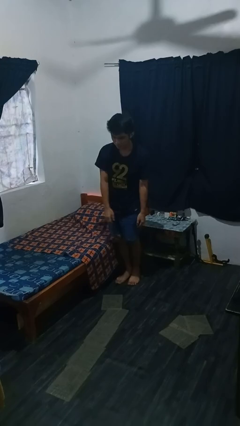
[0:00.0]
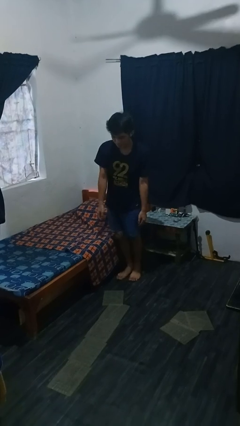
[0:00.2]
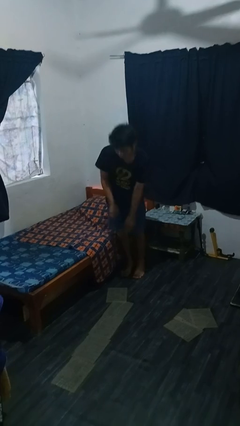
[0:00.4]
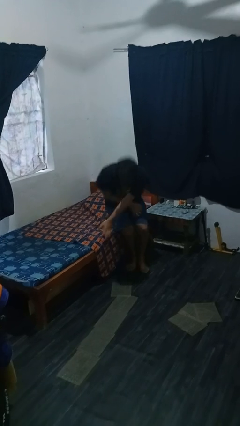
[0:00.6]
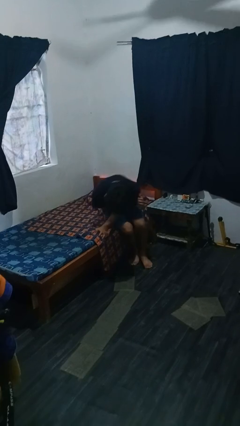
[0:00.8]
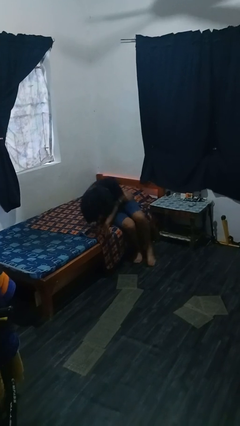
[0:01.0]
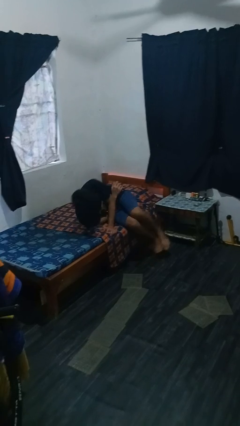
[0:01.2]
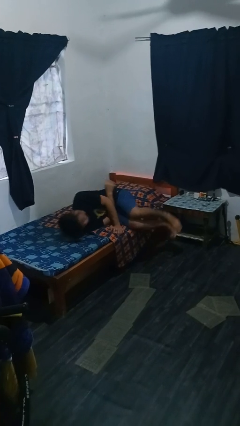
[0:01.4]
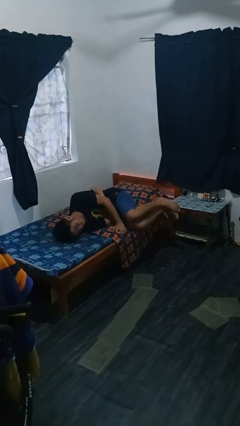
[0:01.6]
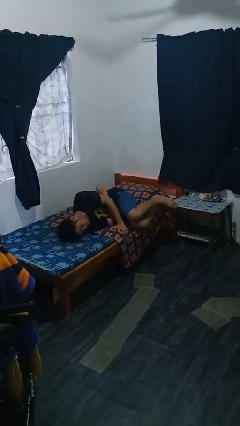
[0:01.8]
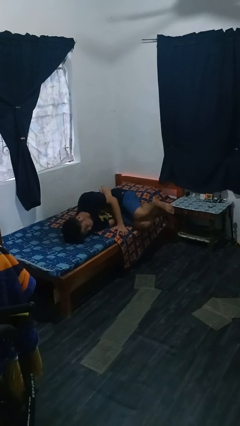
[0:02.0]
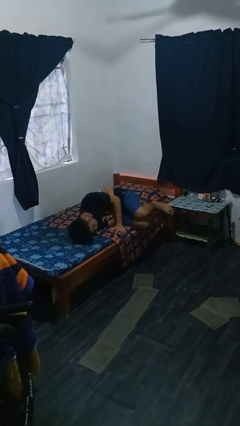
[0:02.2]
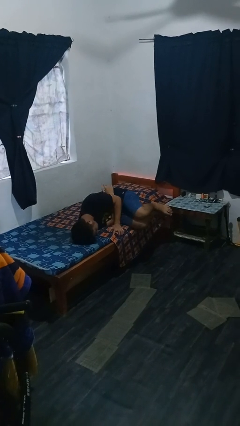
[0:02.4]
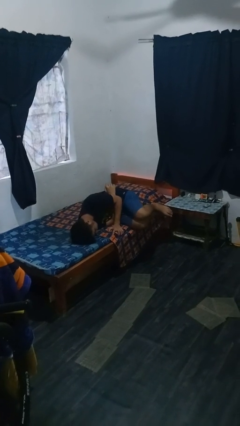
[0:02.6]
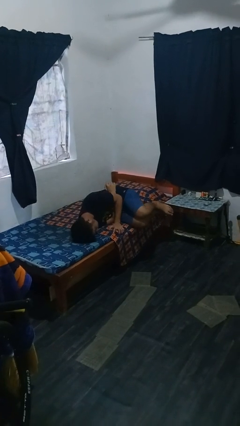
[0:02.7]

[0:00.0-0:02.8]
person lies down on bed

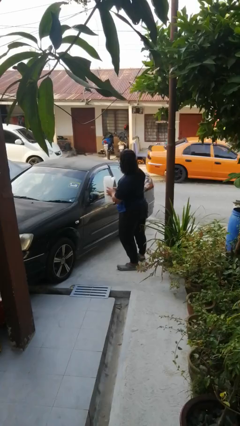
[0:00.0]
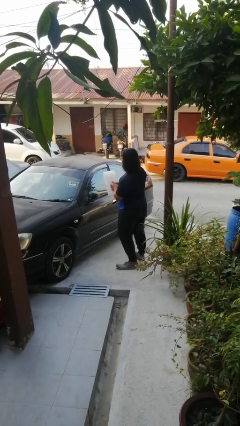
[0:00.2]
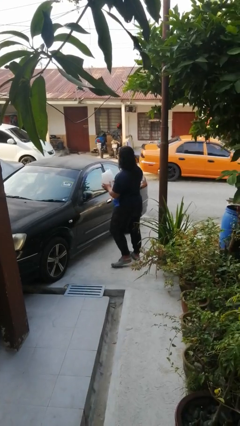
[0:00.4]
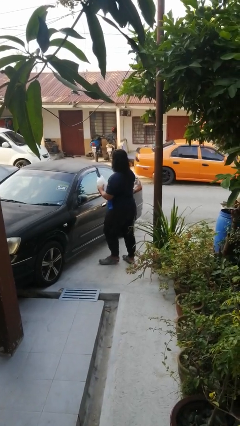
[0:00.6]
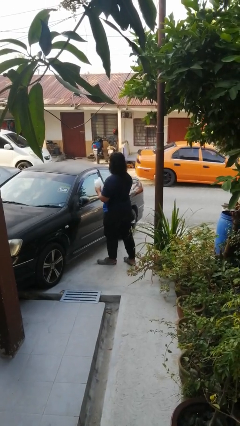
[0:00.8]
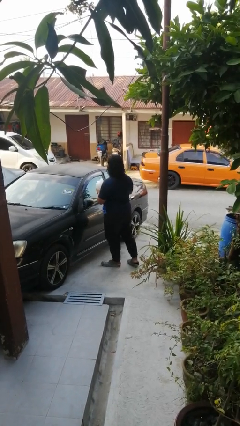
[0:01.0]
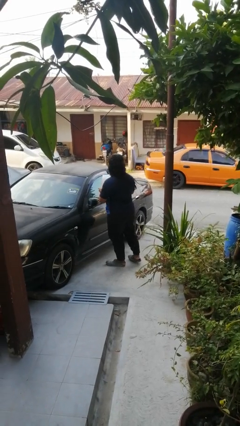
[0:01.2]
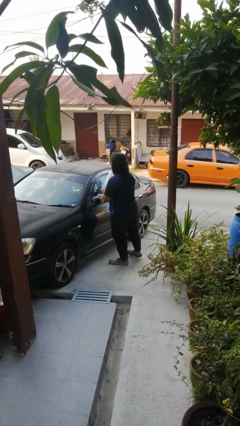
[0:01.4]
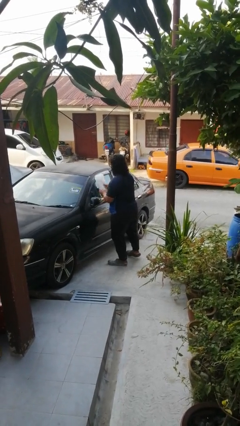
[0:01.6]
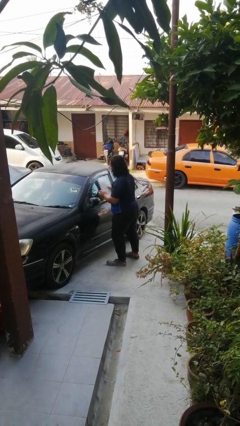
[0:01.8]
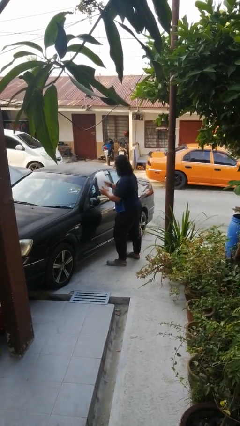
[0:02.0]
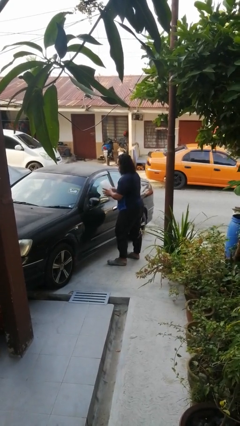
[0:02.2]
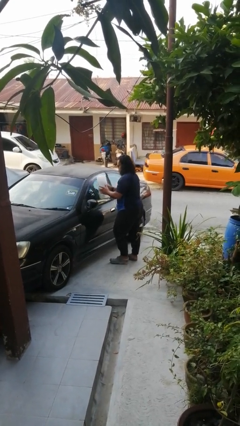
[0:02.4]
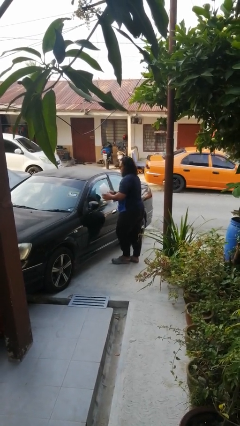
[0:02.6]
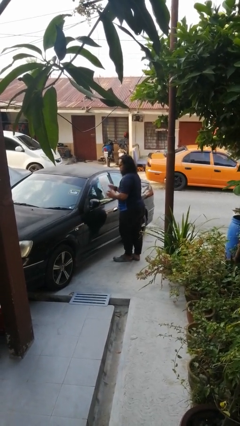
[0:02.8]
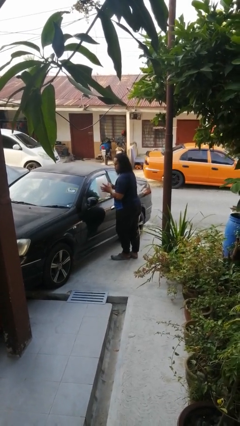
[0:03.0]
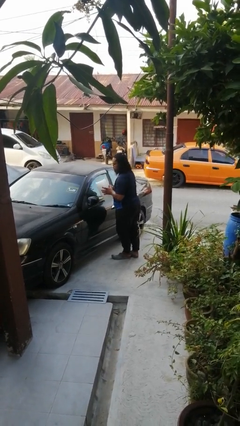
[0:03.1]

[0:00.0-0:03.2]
person polishes car with rag

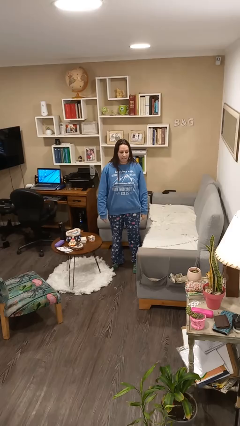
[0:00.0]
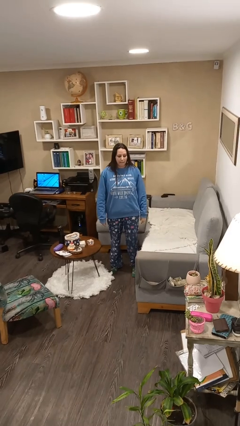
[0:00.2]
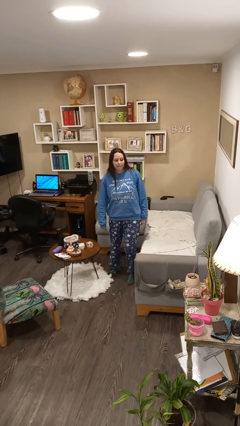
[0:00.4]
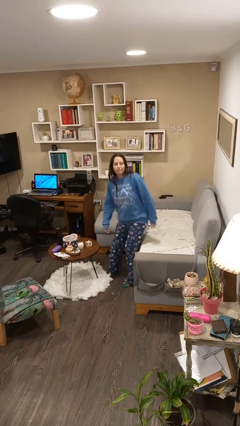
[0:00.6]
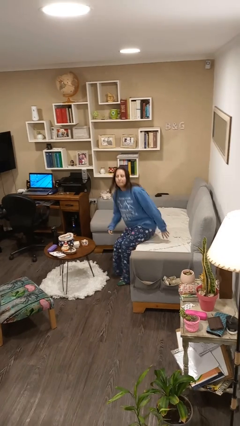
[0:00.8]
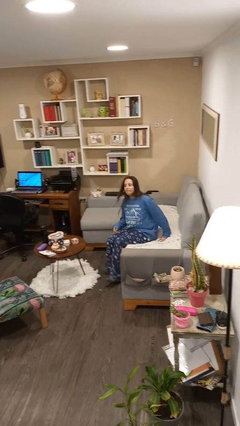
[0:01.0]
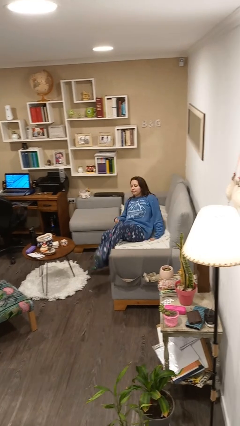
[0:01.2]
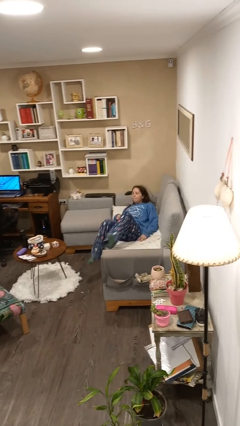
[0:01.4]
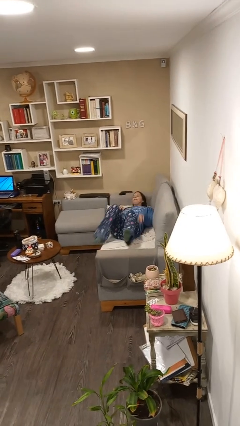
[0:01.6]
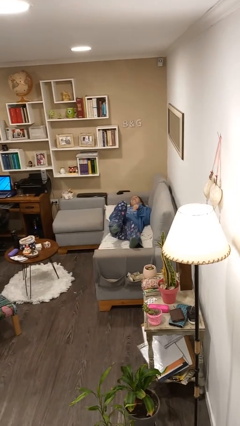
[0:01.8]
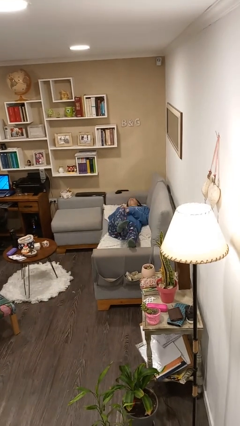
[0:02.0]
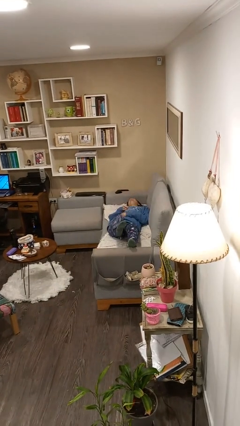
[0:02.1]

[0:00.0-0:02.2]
person lies down on couch

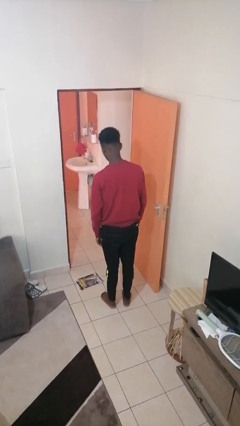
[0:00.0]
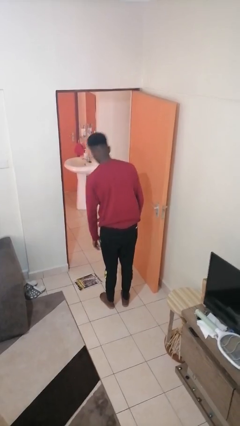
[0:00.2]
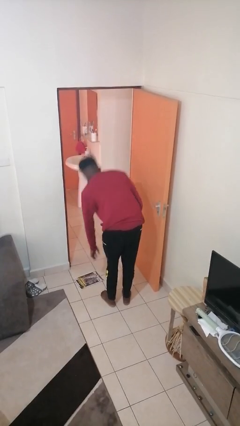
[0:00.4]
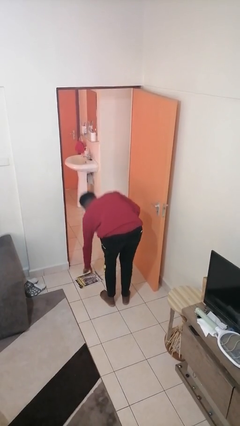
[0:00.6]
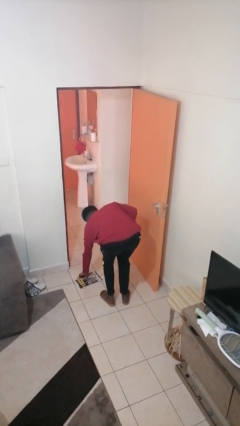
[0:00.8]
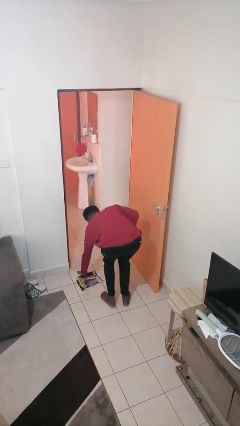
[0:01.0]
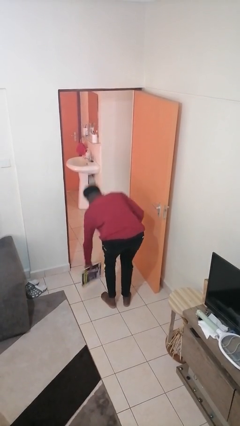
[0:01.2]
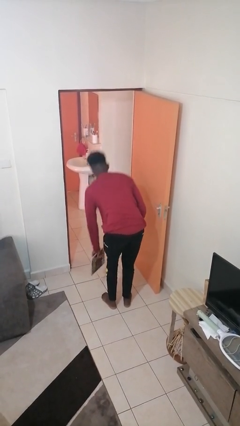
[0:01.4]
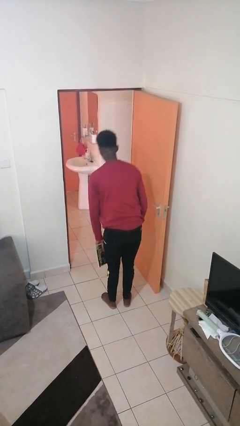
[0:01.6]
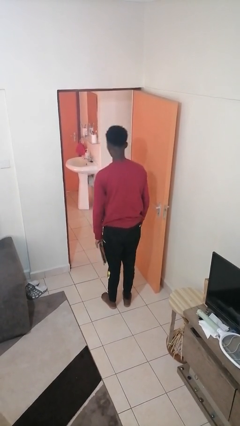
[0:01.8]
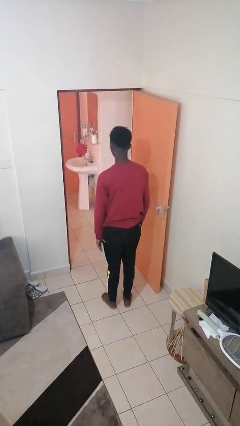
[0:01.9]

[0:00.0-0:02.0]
person picks up object from floor

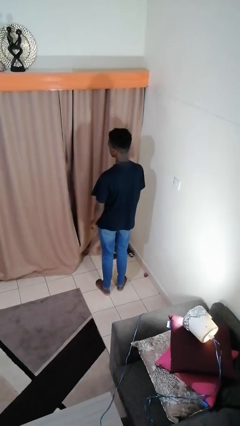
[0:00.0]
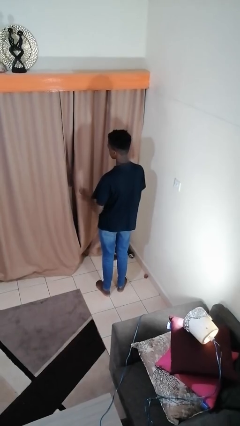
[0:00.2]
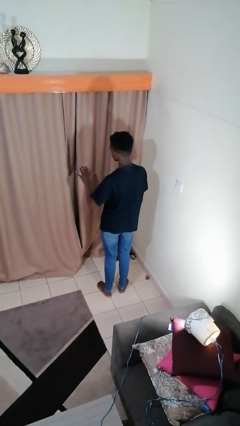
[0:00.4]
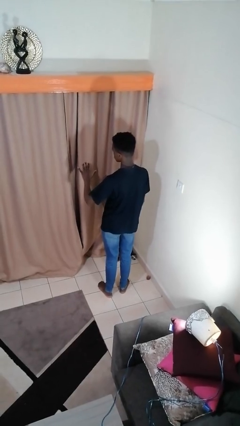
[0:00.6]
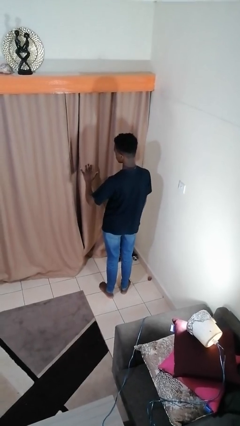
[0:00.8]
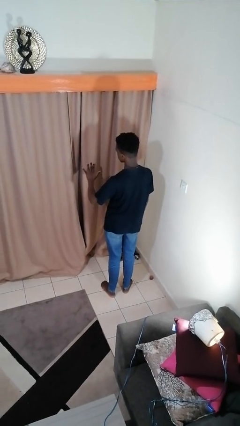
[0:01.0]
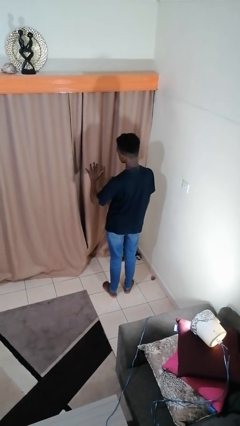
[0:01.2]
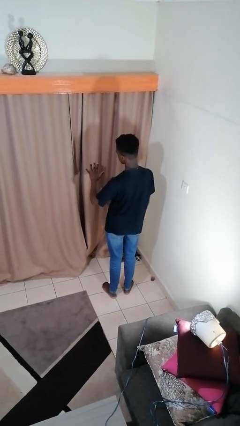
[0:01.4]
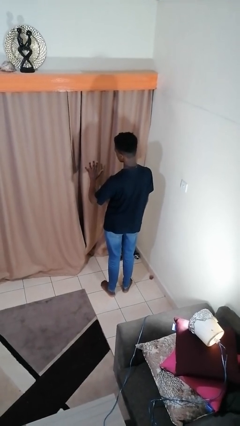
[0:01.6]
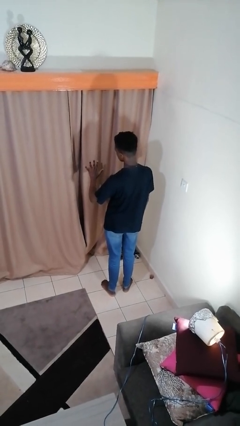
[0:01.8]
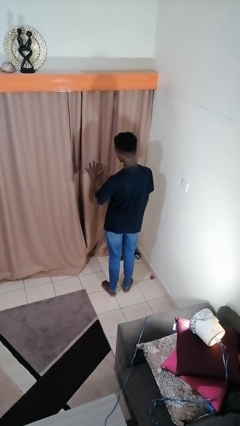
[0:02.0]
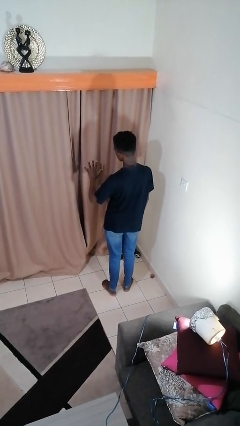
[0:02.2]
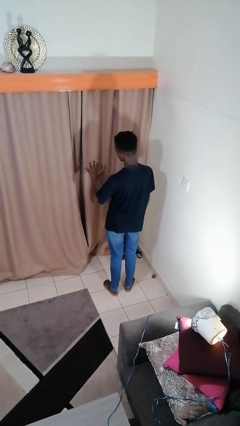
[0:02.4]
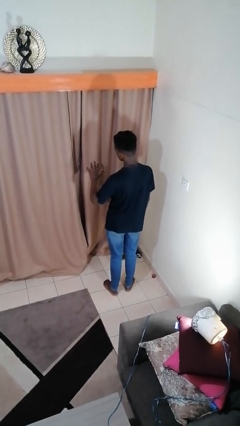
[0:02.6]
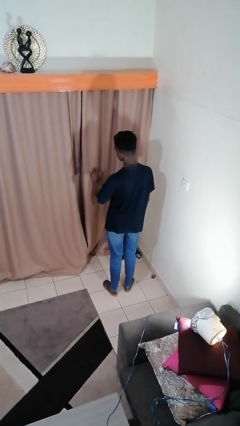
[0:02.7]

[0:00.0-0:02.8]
person gestures number five

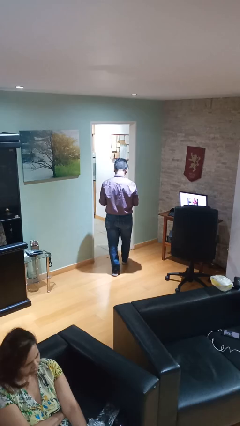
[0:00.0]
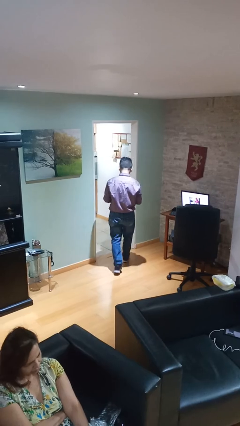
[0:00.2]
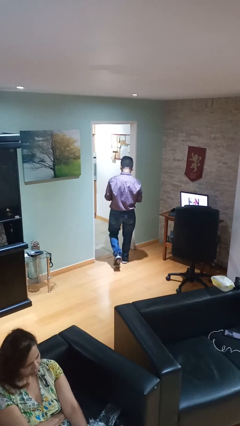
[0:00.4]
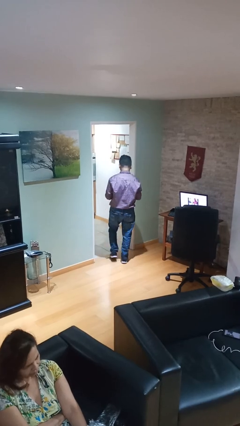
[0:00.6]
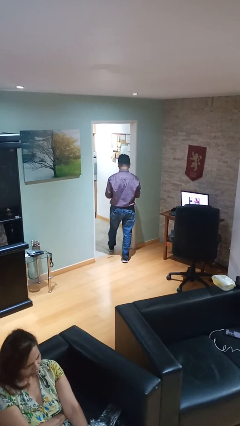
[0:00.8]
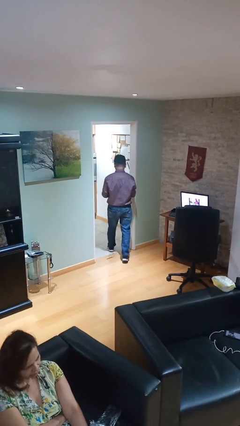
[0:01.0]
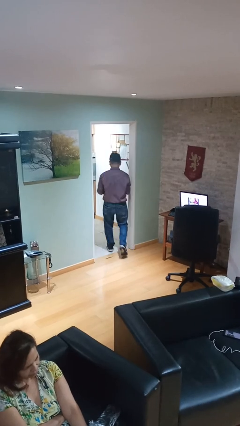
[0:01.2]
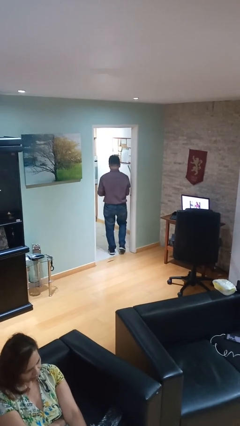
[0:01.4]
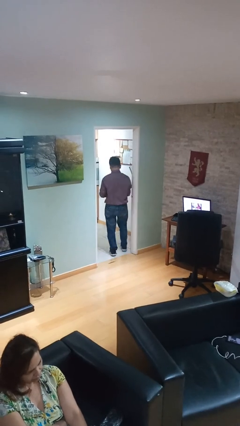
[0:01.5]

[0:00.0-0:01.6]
person exits scene through structure

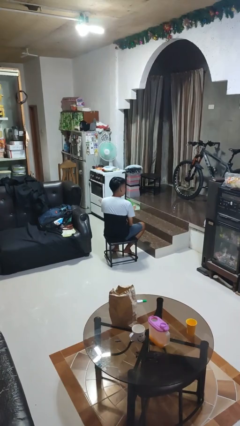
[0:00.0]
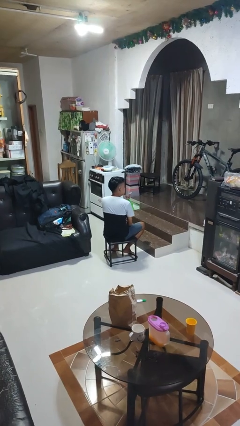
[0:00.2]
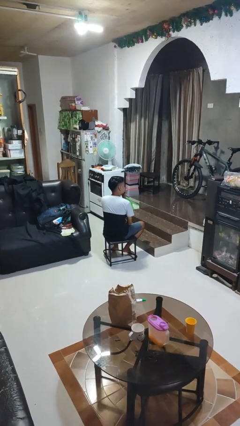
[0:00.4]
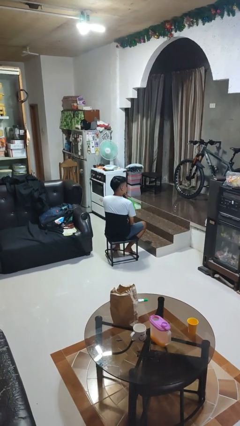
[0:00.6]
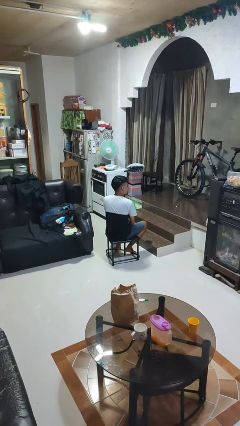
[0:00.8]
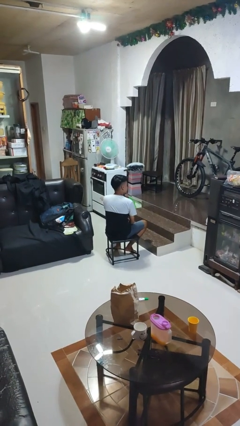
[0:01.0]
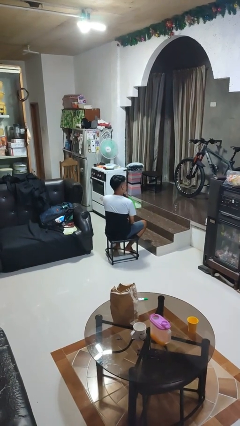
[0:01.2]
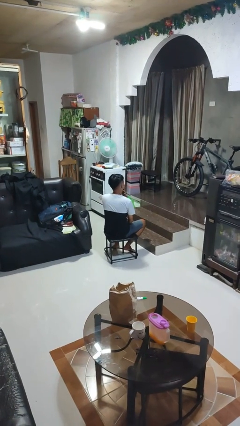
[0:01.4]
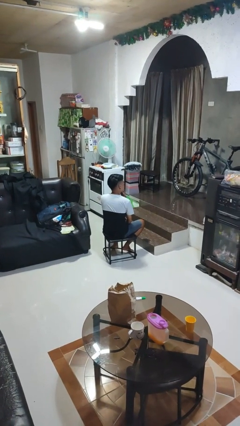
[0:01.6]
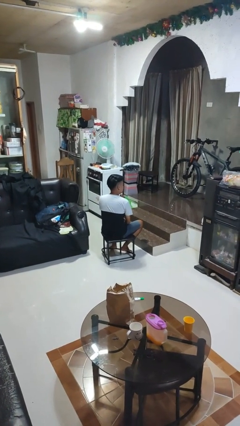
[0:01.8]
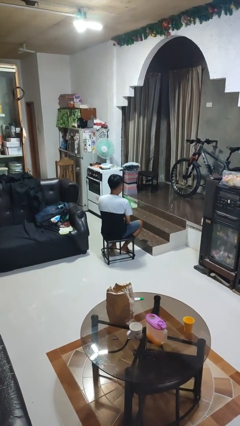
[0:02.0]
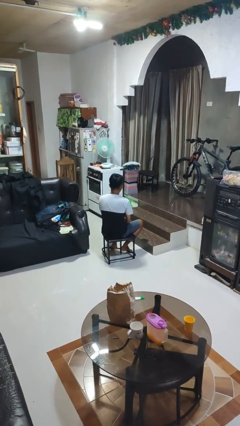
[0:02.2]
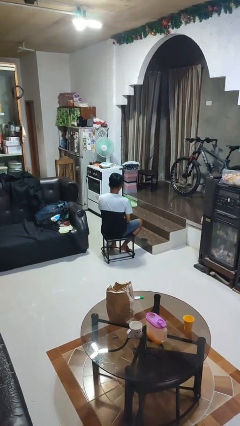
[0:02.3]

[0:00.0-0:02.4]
person strokes chin

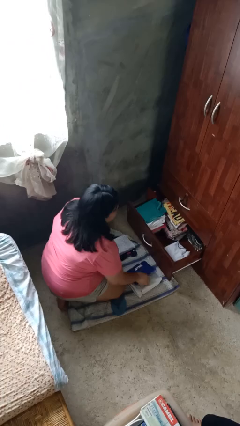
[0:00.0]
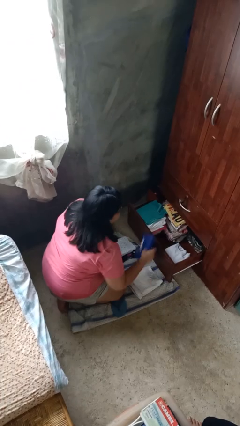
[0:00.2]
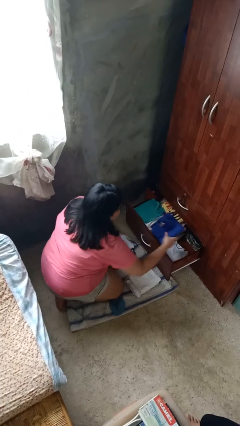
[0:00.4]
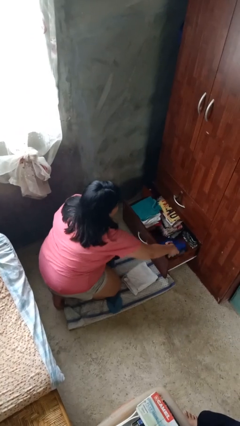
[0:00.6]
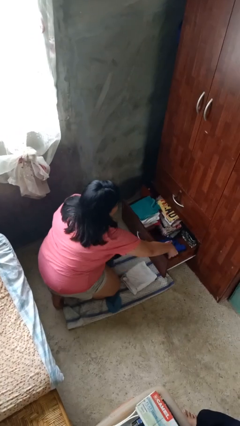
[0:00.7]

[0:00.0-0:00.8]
person puts clothes into dresser
